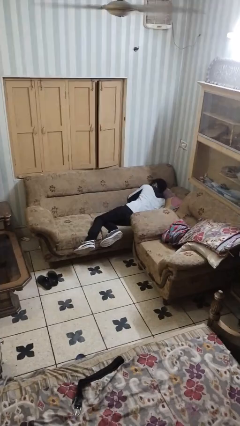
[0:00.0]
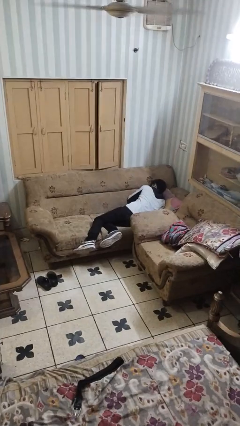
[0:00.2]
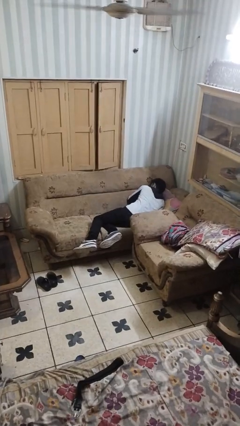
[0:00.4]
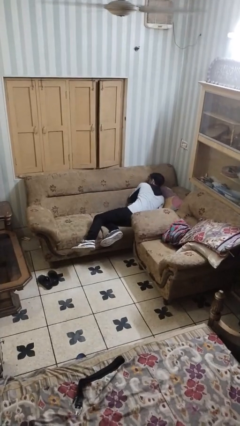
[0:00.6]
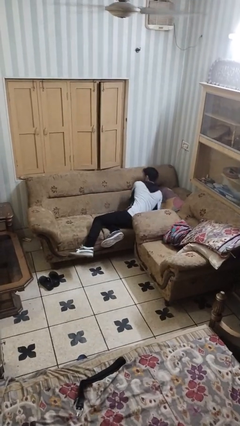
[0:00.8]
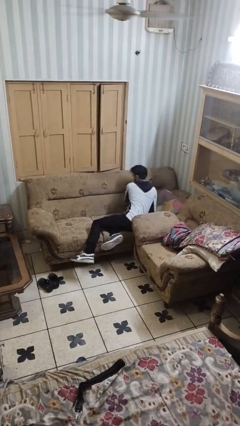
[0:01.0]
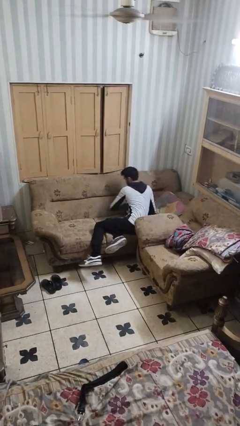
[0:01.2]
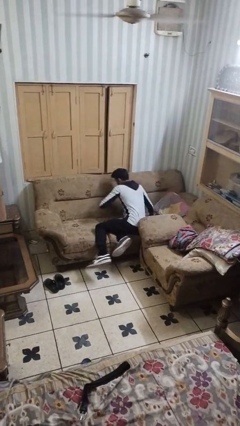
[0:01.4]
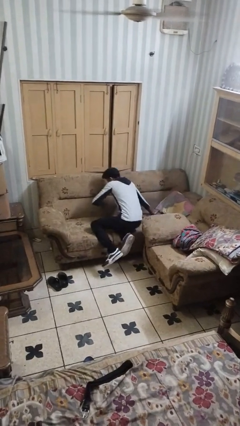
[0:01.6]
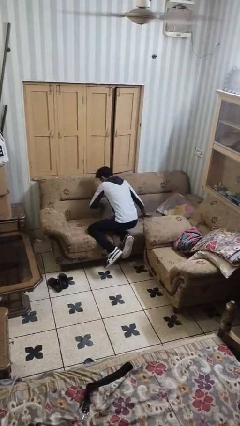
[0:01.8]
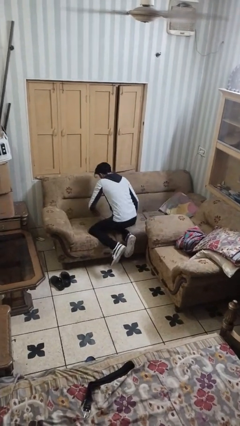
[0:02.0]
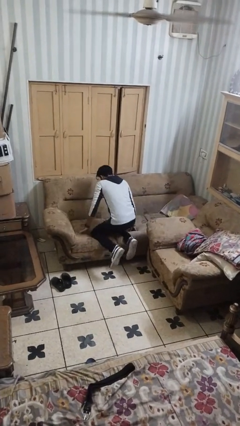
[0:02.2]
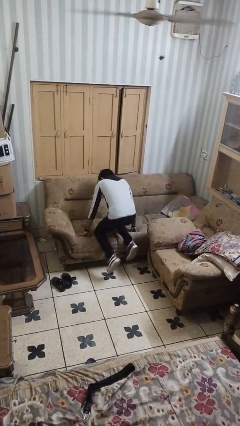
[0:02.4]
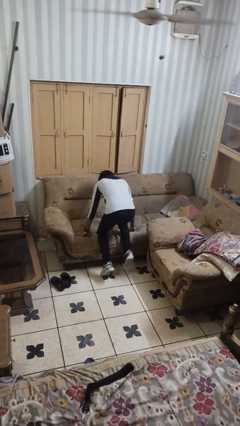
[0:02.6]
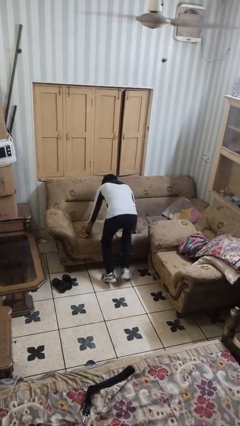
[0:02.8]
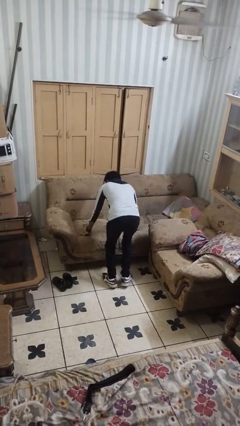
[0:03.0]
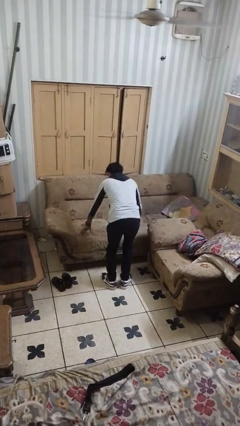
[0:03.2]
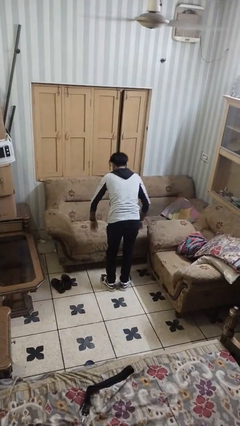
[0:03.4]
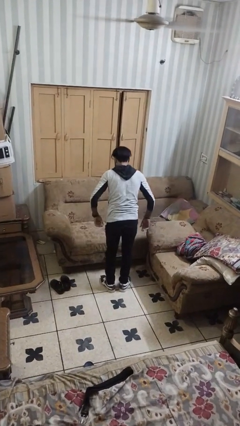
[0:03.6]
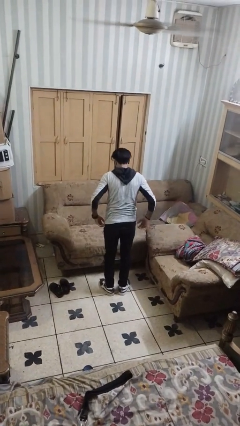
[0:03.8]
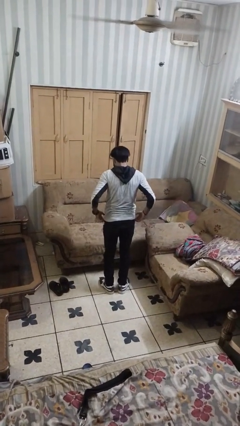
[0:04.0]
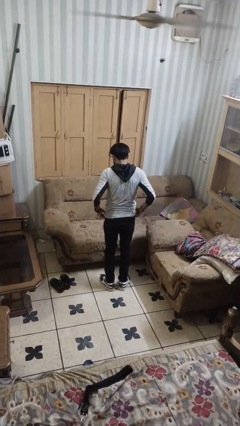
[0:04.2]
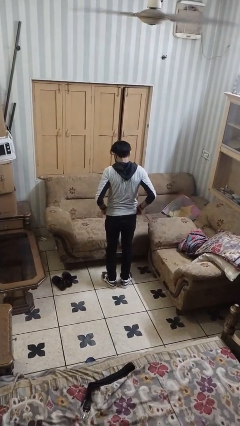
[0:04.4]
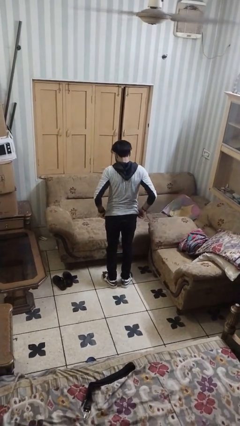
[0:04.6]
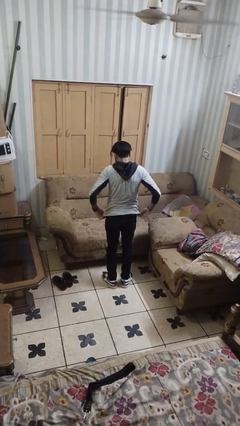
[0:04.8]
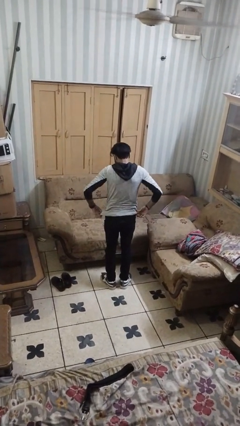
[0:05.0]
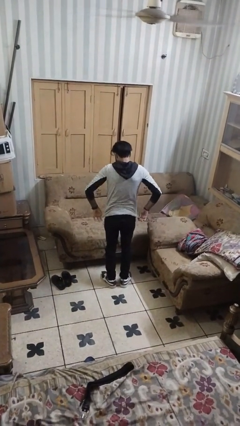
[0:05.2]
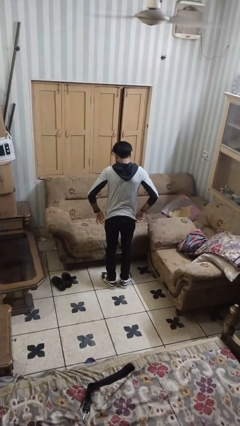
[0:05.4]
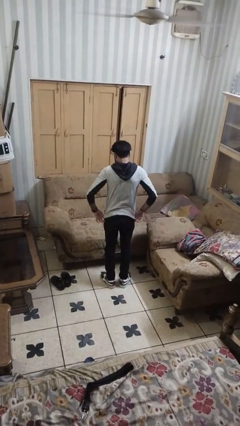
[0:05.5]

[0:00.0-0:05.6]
person stands up

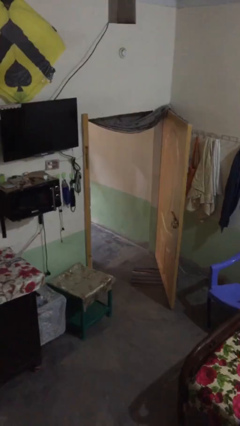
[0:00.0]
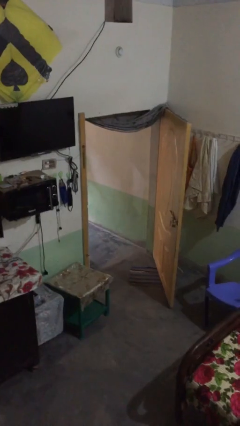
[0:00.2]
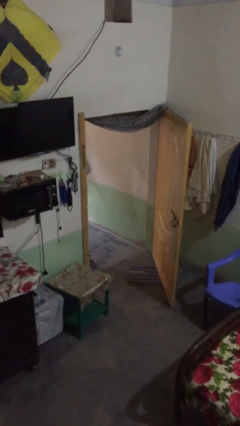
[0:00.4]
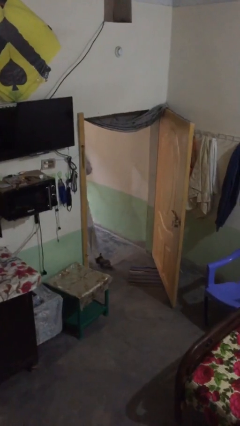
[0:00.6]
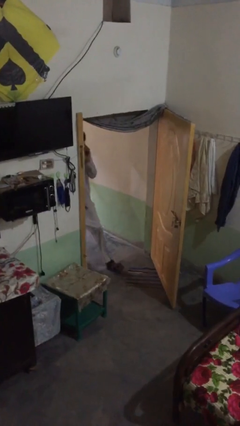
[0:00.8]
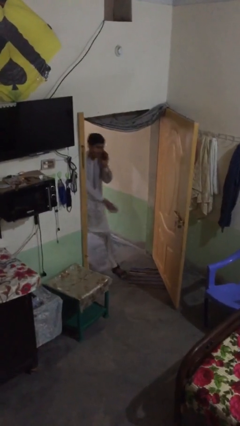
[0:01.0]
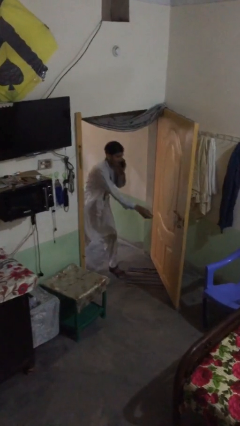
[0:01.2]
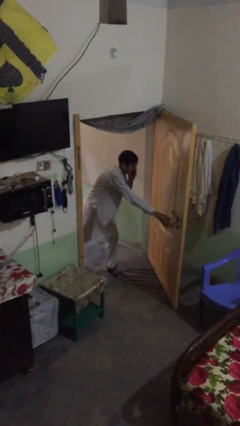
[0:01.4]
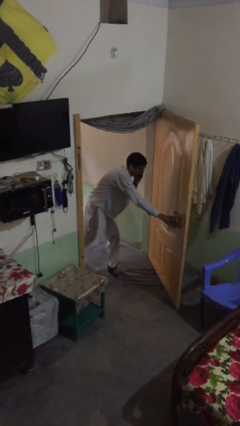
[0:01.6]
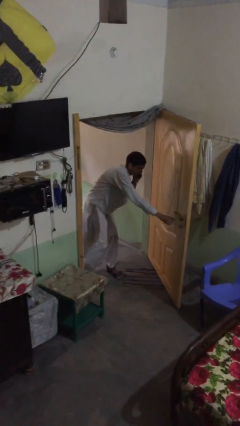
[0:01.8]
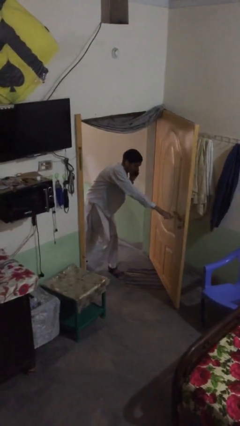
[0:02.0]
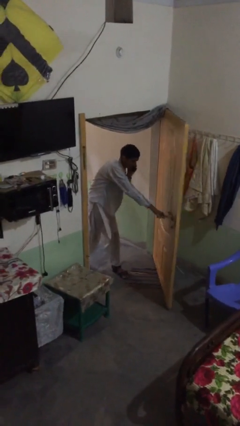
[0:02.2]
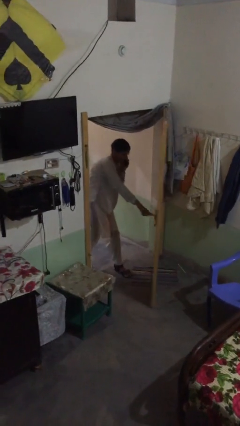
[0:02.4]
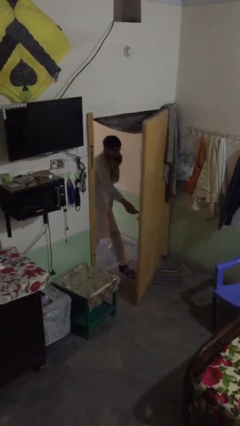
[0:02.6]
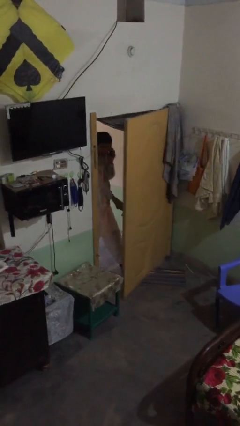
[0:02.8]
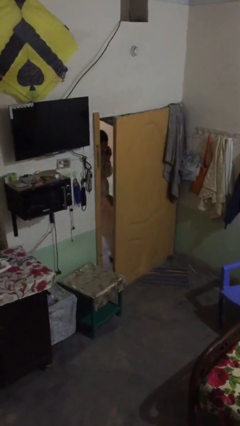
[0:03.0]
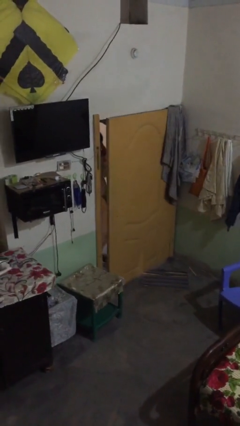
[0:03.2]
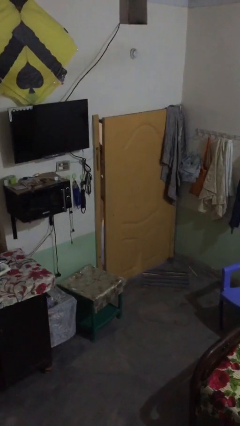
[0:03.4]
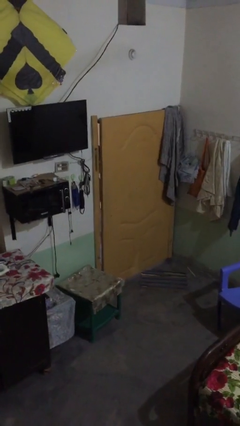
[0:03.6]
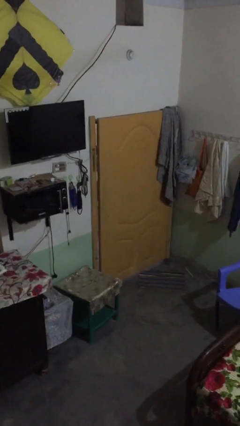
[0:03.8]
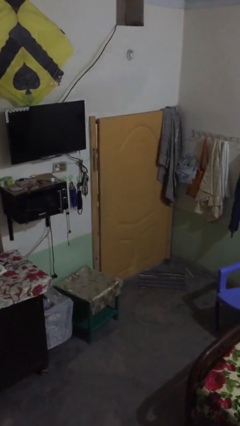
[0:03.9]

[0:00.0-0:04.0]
person closes facility door

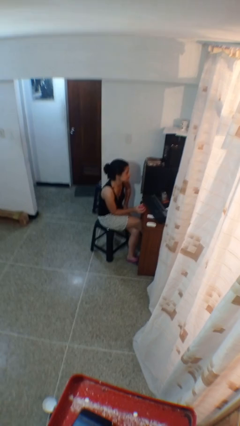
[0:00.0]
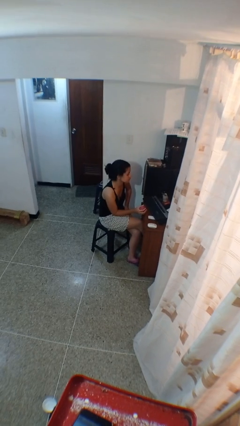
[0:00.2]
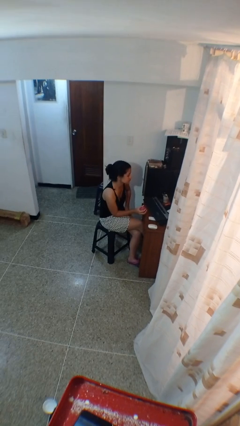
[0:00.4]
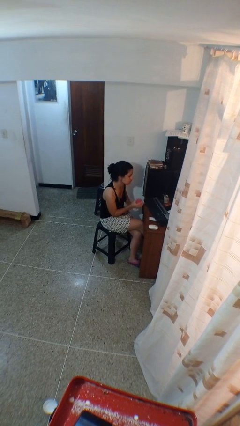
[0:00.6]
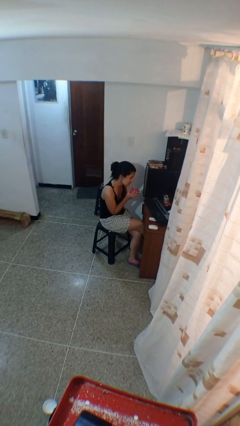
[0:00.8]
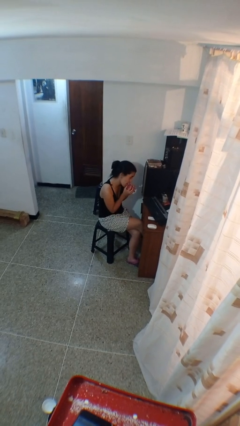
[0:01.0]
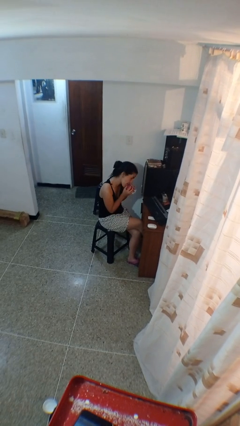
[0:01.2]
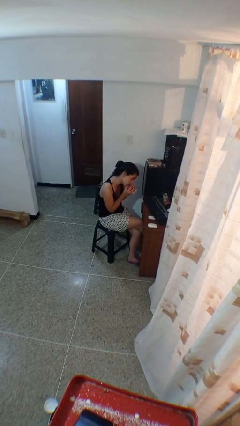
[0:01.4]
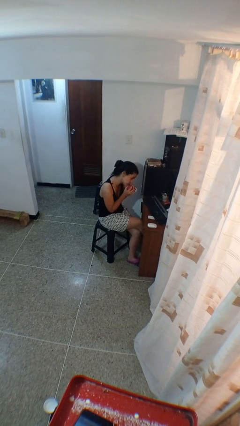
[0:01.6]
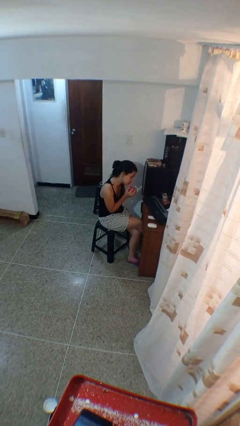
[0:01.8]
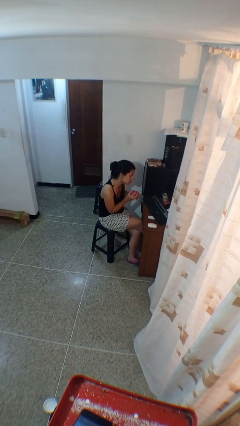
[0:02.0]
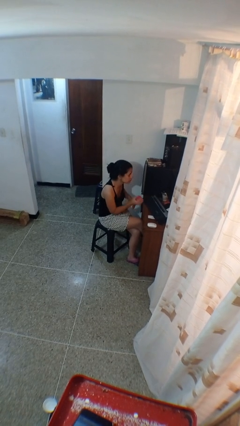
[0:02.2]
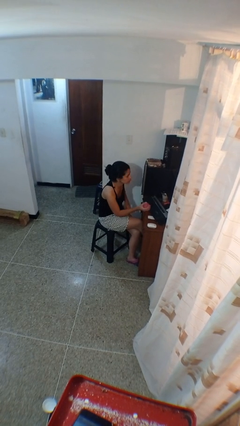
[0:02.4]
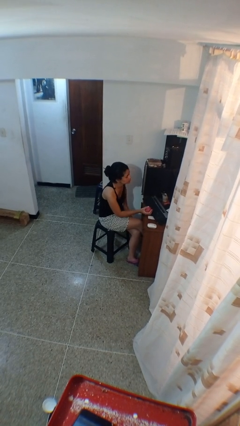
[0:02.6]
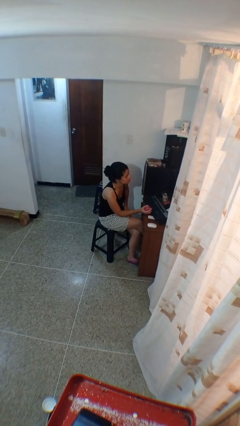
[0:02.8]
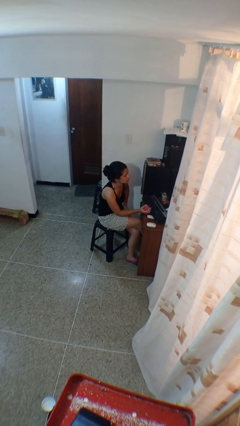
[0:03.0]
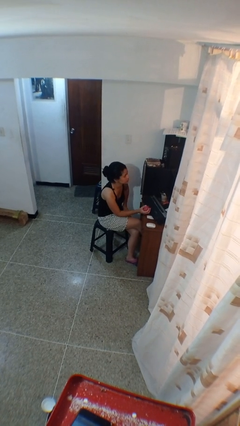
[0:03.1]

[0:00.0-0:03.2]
person eats apple

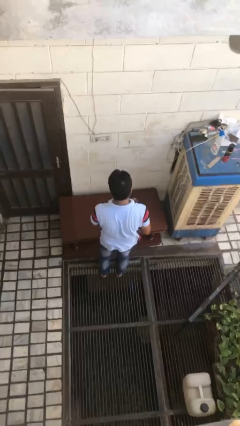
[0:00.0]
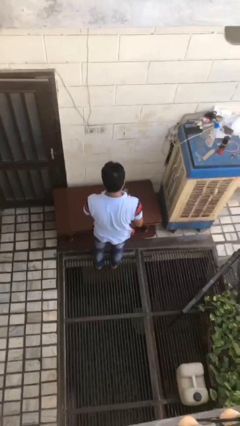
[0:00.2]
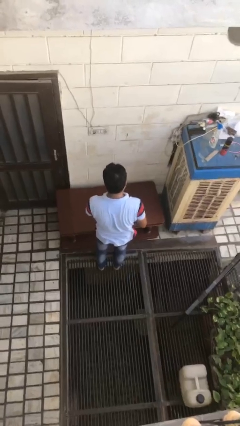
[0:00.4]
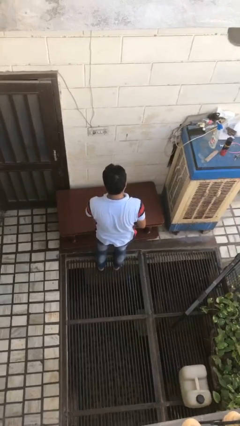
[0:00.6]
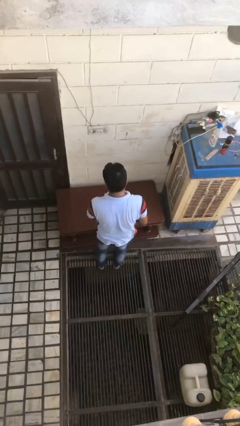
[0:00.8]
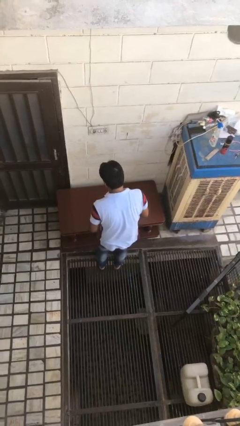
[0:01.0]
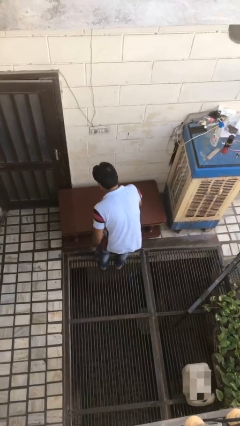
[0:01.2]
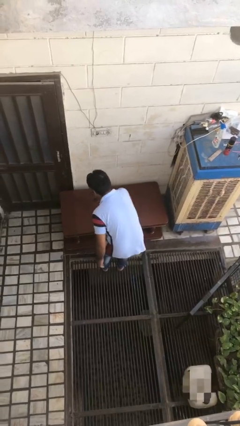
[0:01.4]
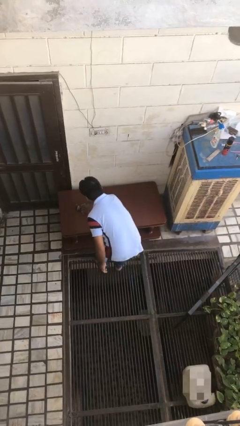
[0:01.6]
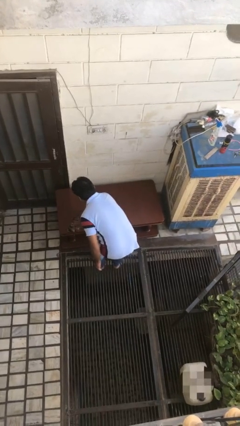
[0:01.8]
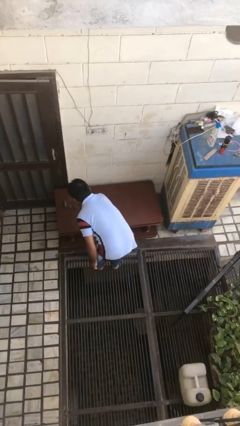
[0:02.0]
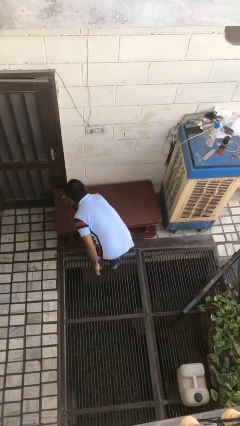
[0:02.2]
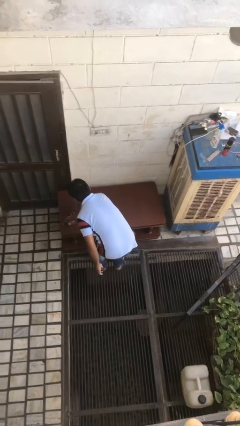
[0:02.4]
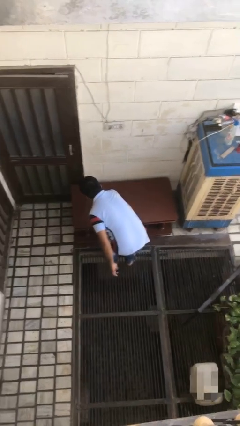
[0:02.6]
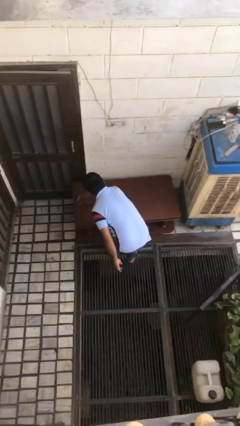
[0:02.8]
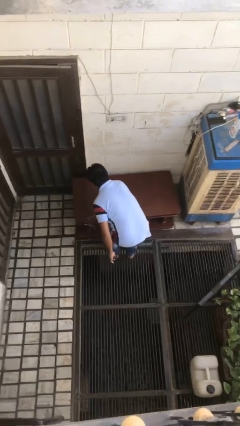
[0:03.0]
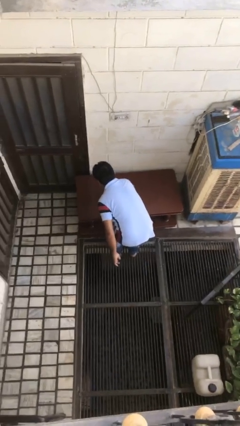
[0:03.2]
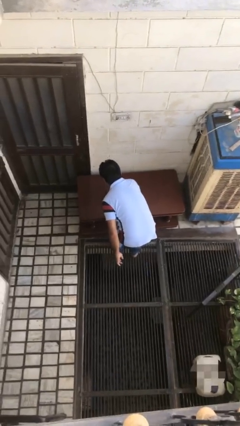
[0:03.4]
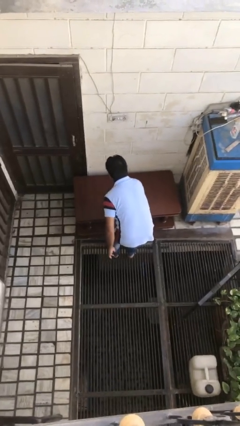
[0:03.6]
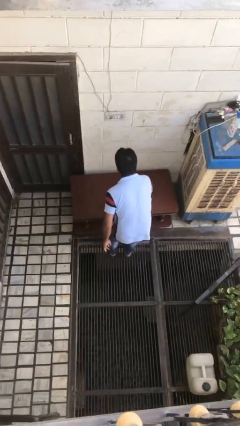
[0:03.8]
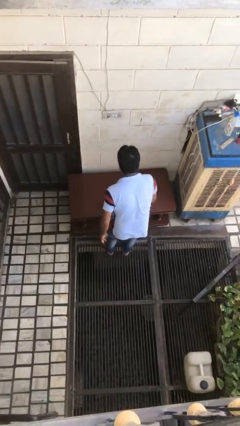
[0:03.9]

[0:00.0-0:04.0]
person cleans table with rag

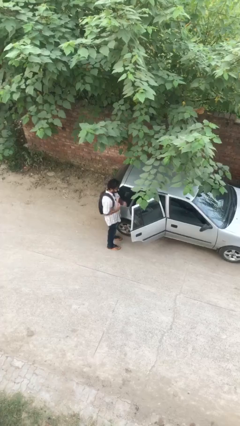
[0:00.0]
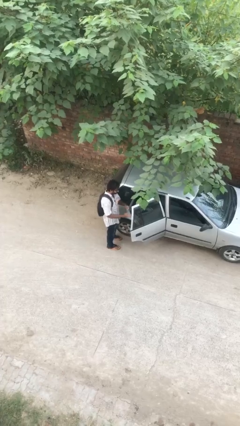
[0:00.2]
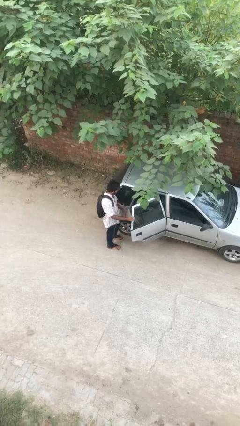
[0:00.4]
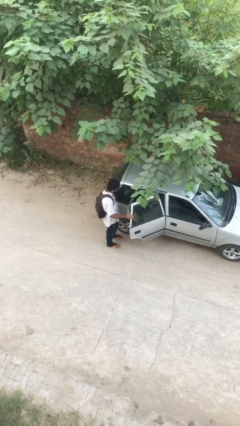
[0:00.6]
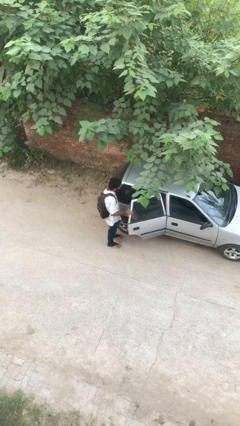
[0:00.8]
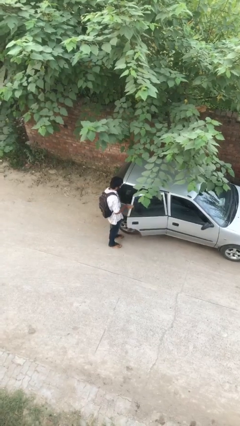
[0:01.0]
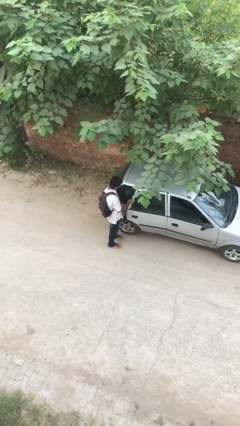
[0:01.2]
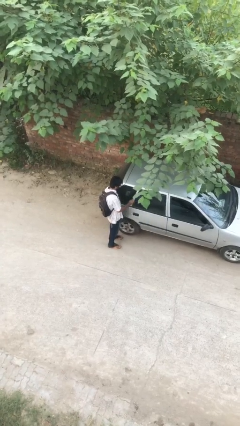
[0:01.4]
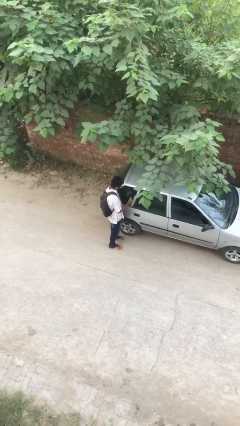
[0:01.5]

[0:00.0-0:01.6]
person closes car door
